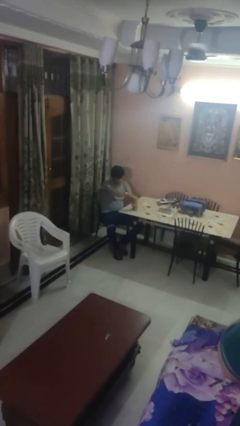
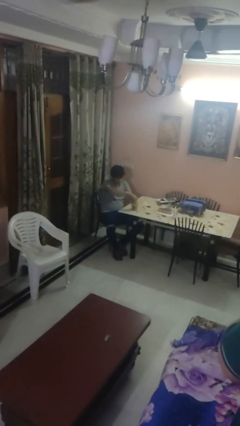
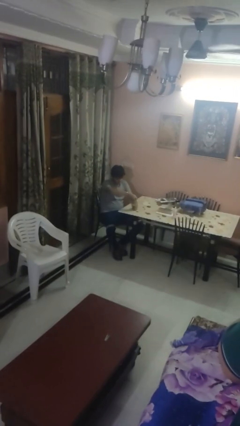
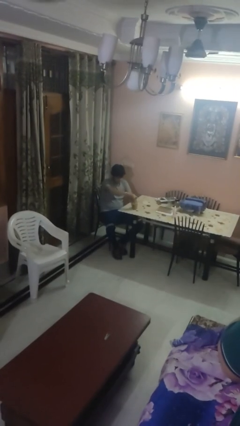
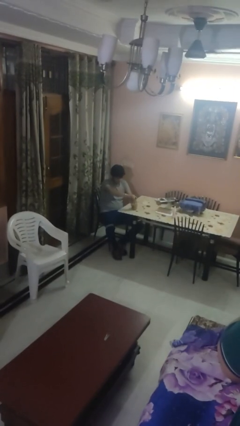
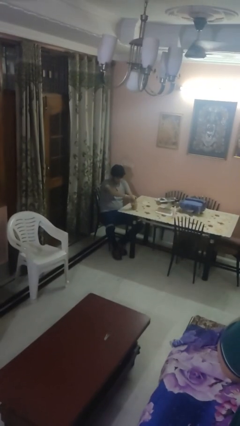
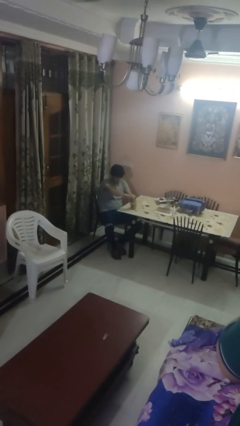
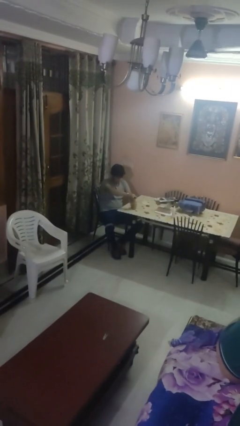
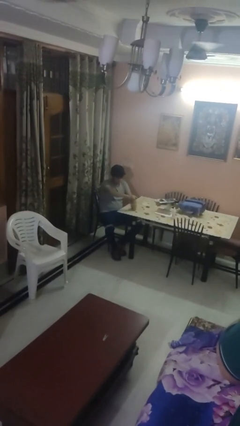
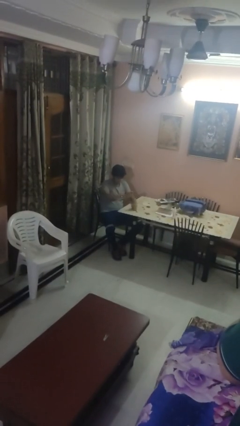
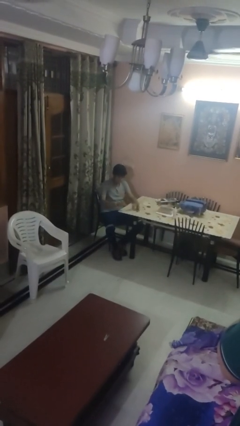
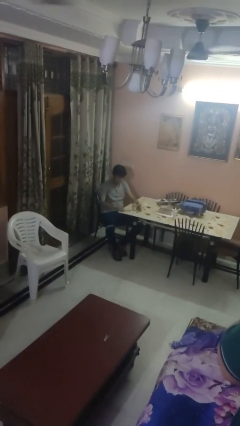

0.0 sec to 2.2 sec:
person unscrews lid from bottle

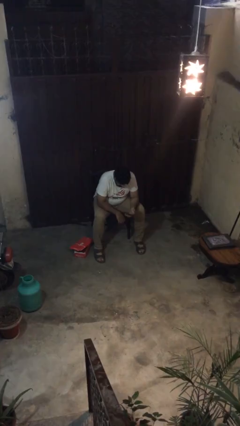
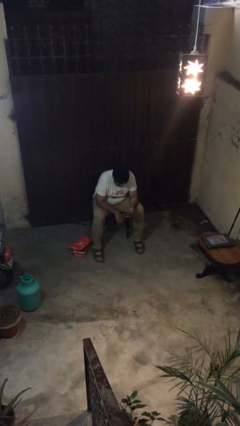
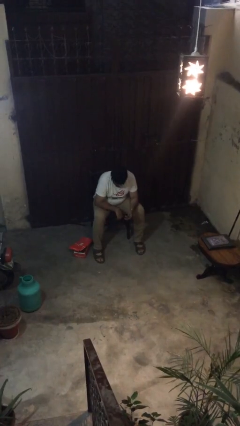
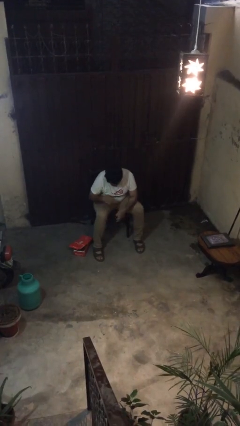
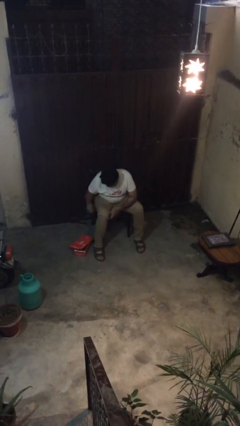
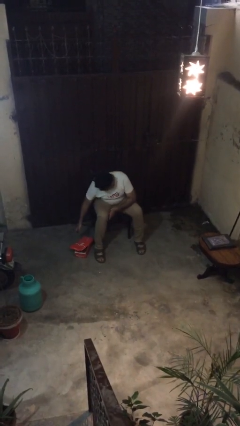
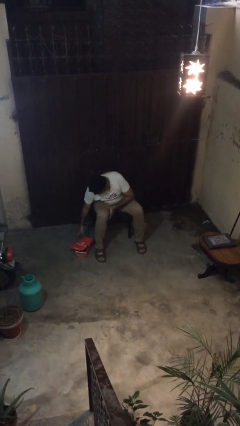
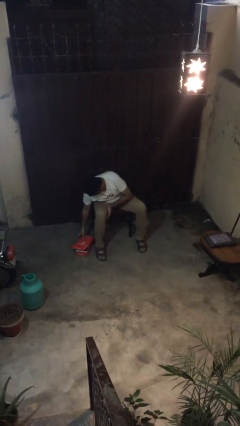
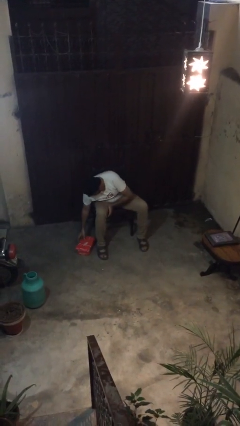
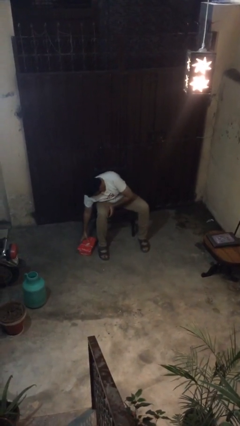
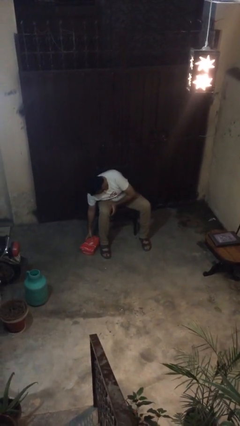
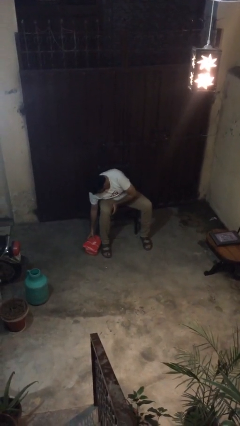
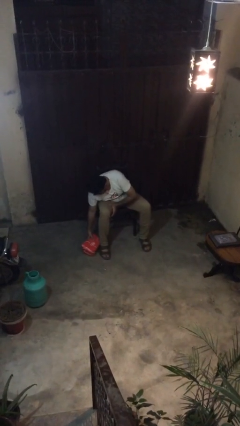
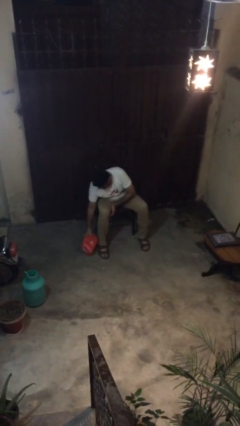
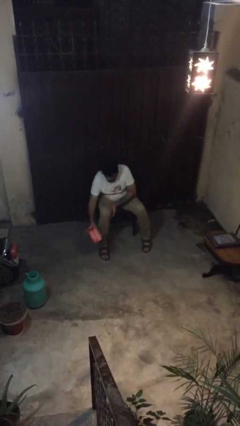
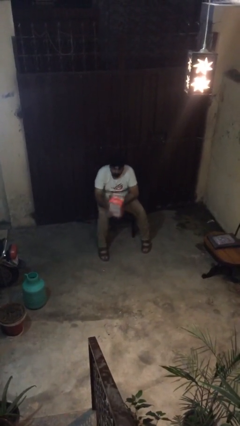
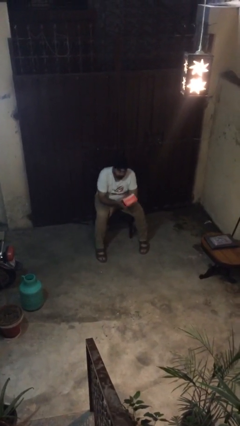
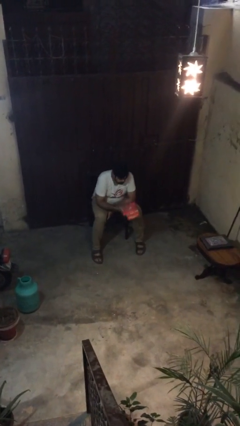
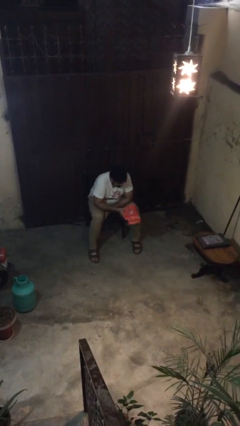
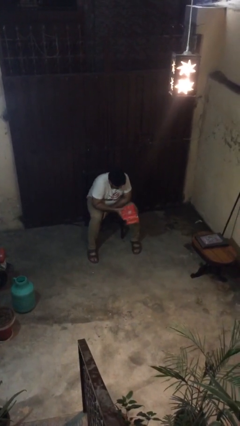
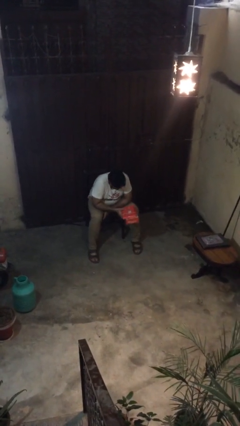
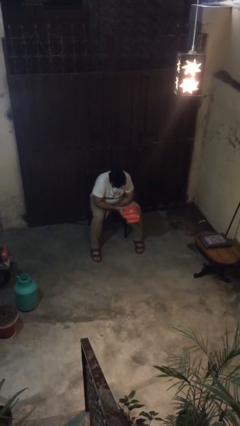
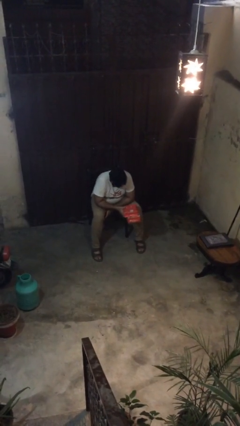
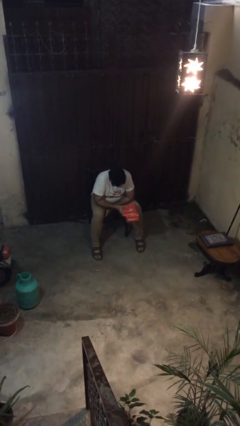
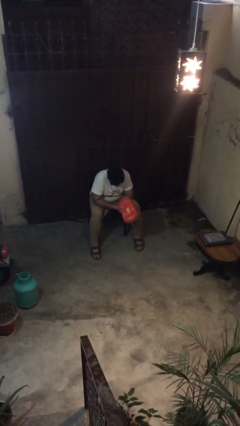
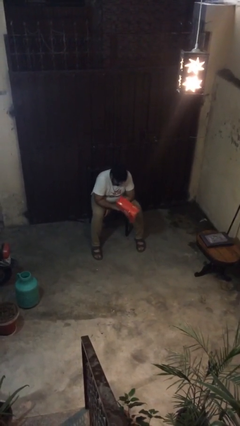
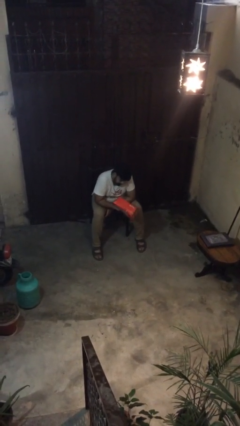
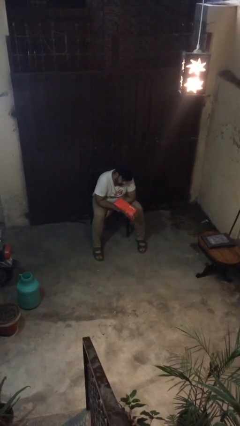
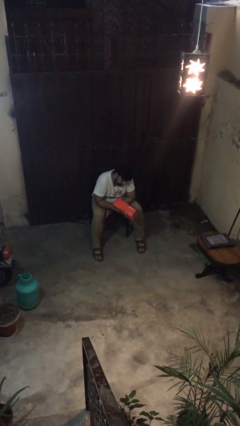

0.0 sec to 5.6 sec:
person picks up object from floor

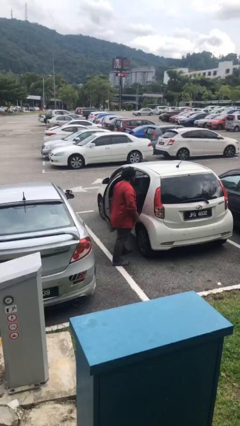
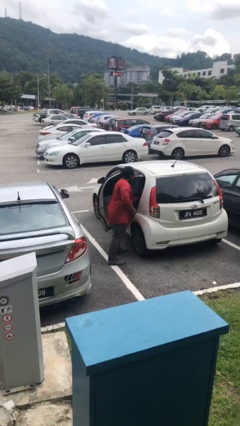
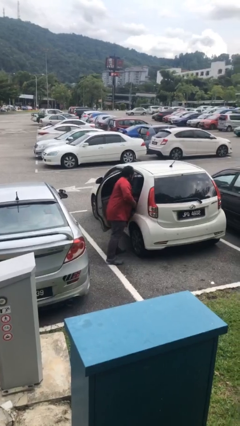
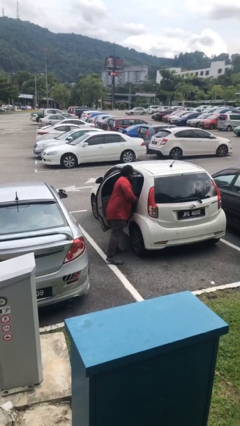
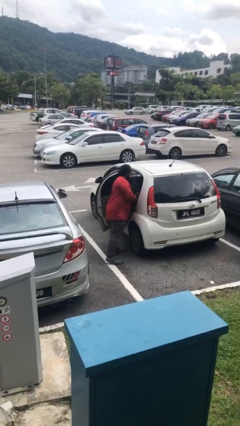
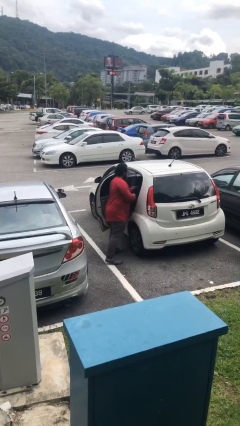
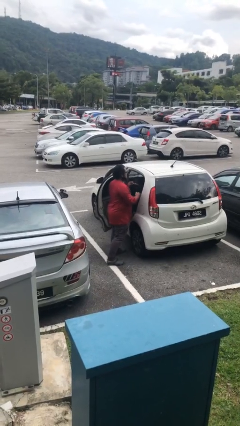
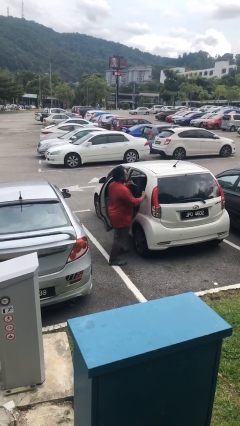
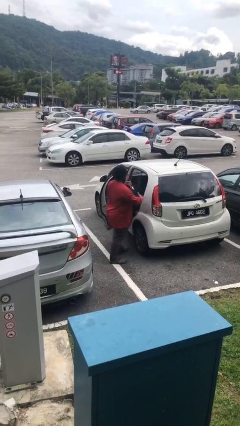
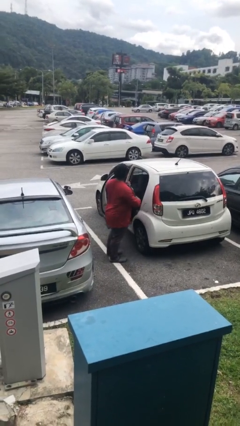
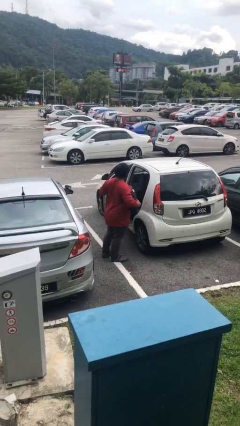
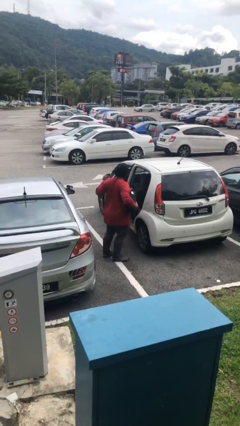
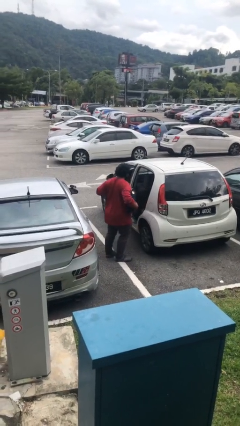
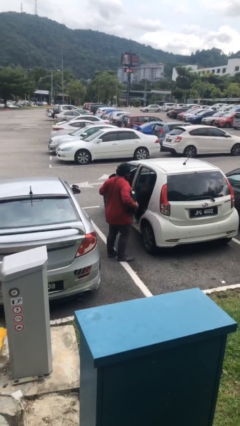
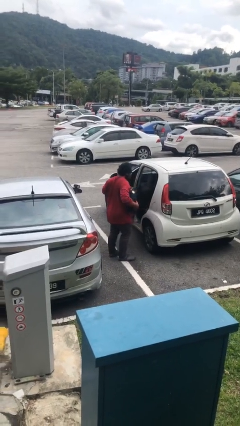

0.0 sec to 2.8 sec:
person unloads car

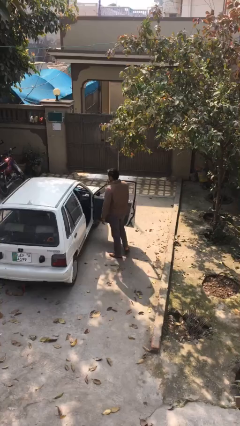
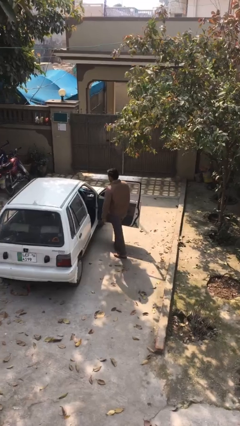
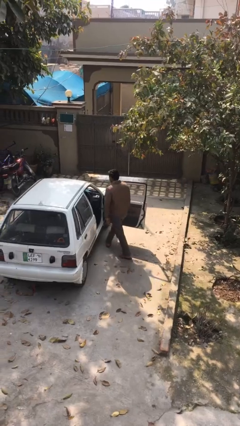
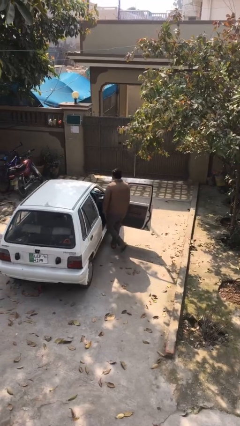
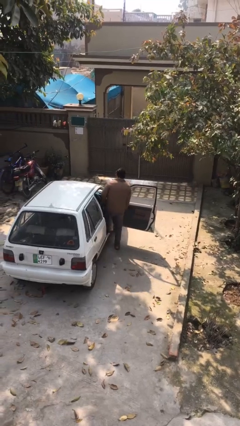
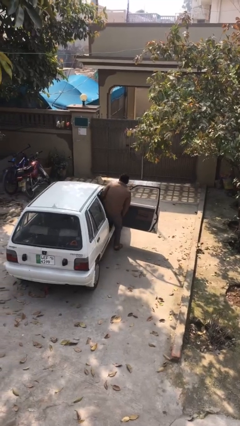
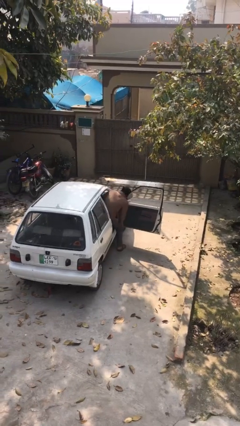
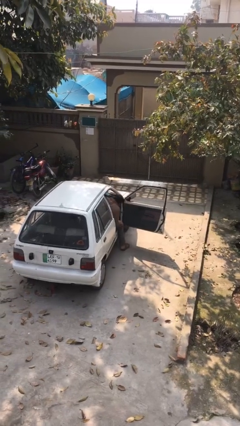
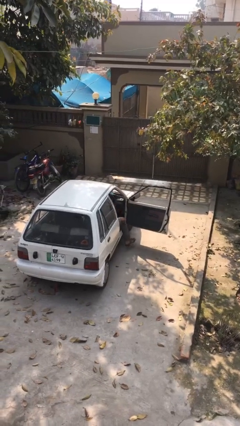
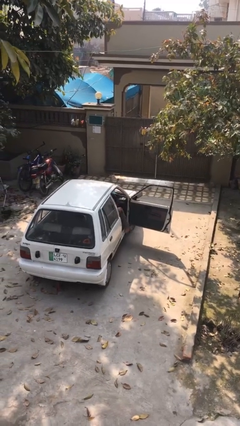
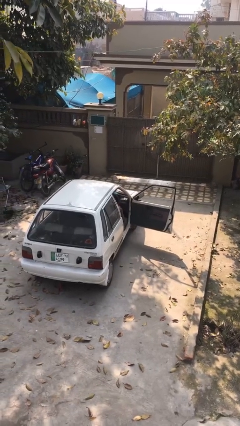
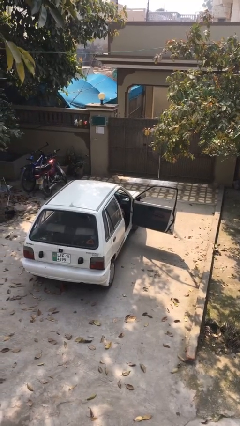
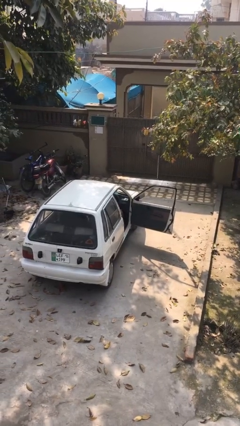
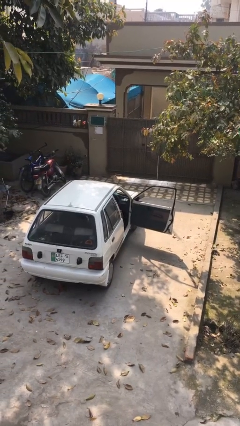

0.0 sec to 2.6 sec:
person enters car

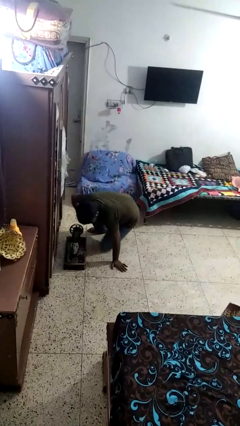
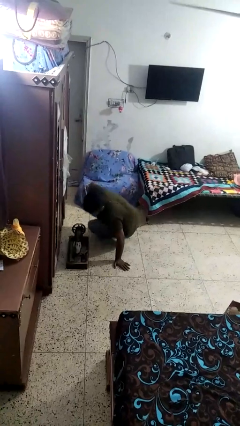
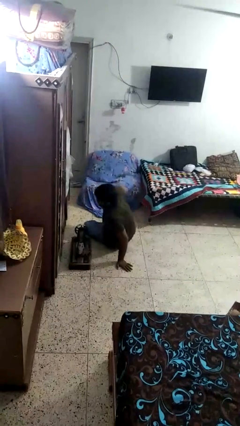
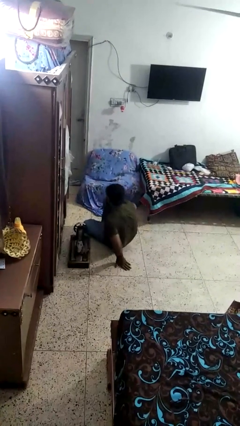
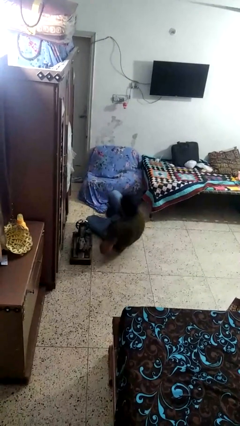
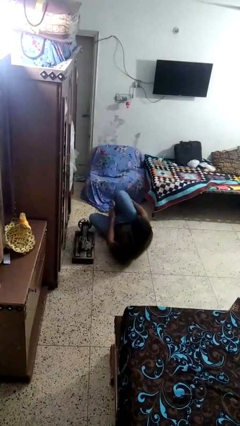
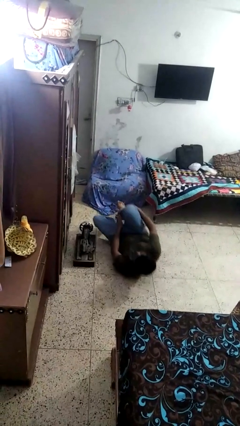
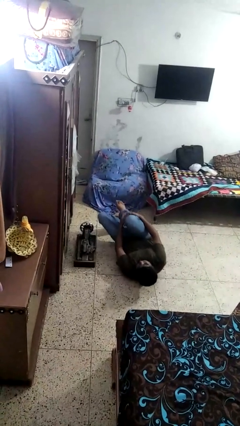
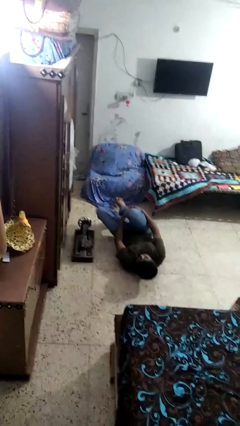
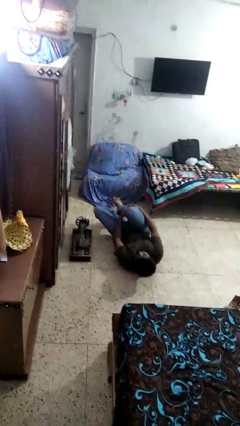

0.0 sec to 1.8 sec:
person lies down on floor

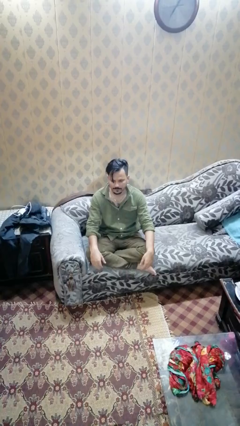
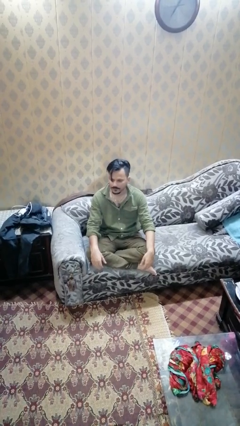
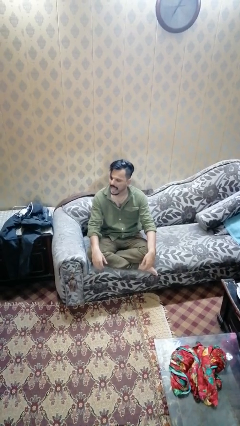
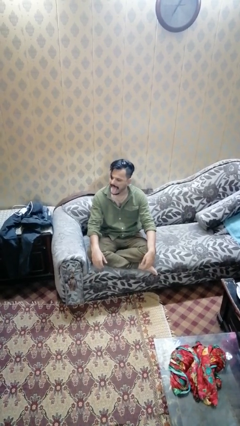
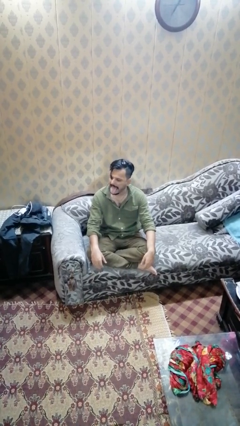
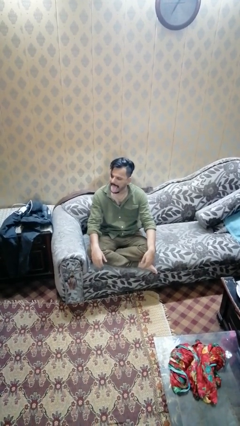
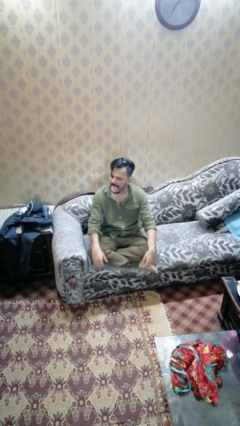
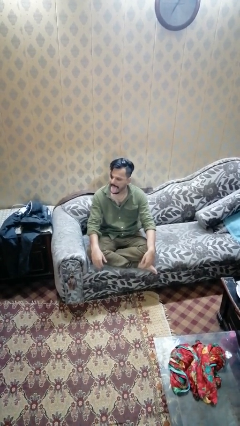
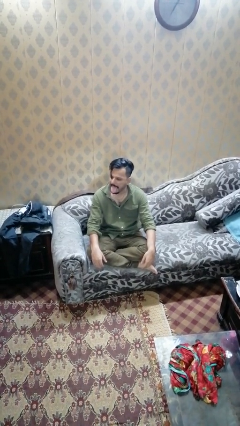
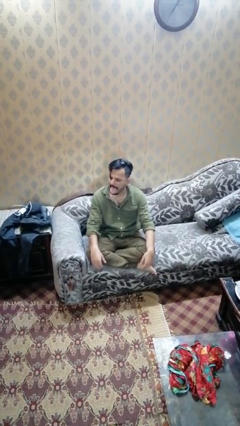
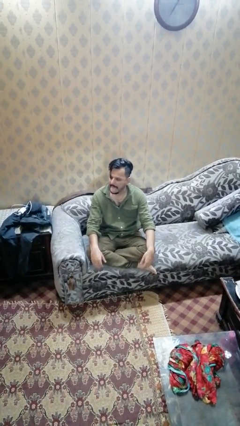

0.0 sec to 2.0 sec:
person sticks out tongue
